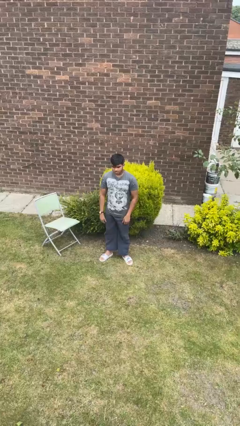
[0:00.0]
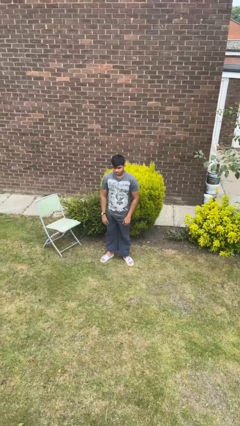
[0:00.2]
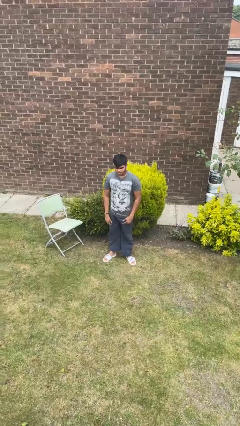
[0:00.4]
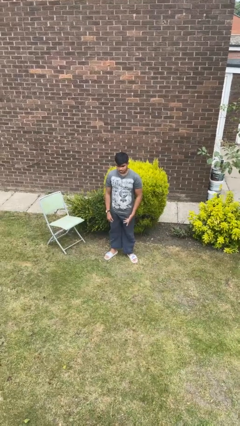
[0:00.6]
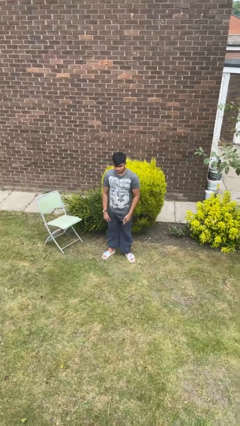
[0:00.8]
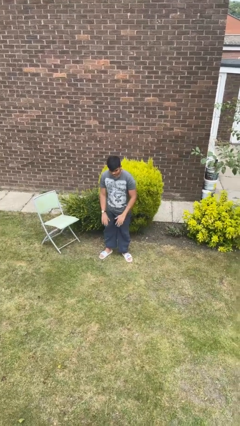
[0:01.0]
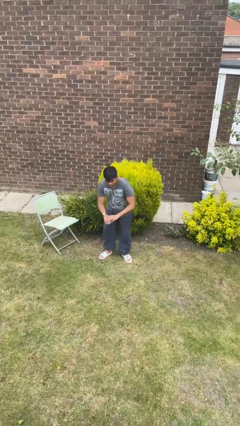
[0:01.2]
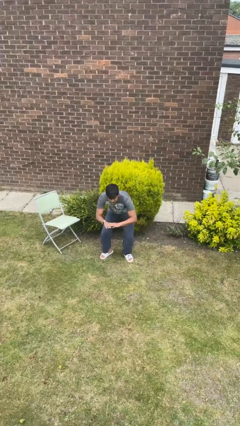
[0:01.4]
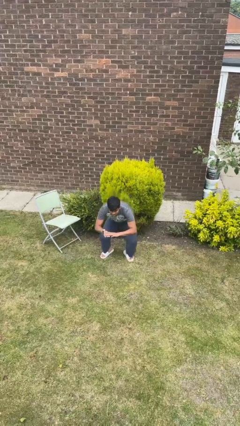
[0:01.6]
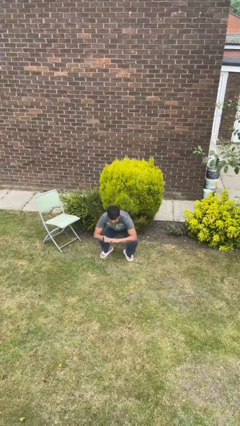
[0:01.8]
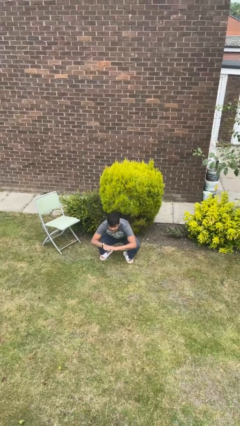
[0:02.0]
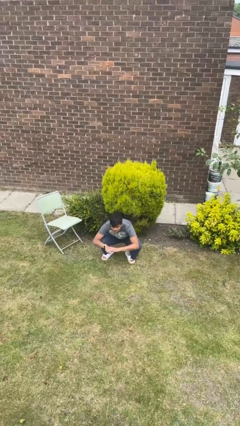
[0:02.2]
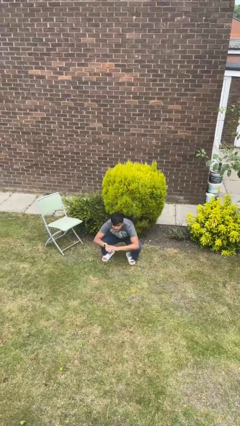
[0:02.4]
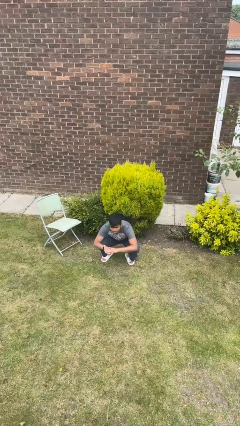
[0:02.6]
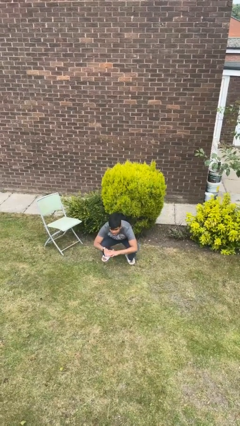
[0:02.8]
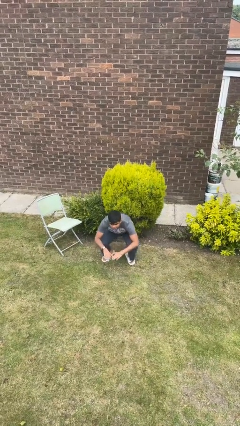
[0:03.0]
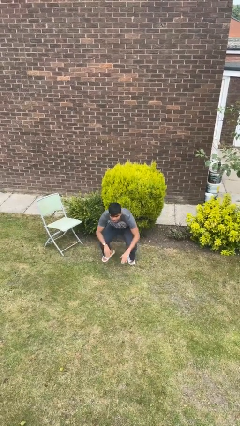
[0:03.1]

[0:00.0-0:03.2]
person squats

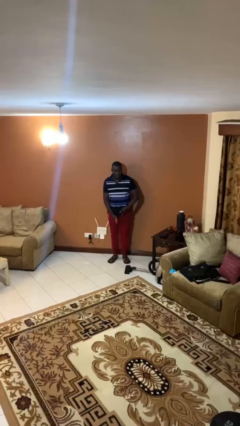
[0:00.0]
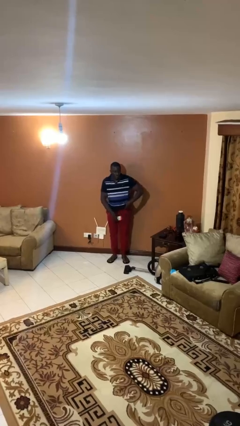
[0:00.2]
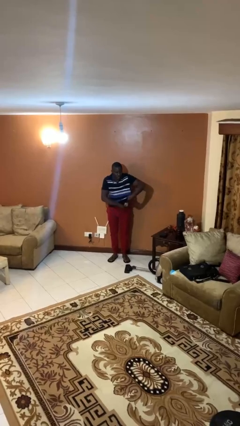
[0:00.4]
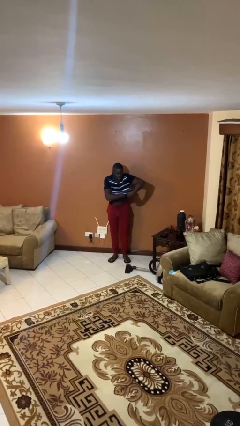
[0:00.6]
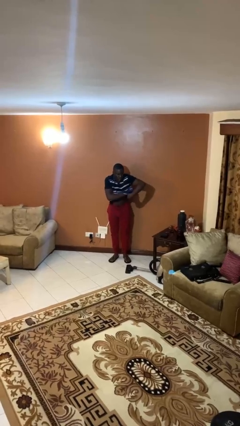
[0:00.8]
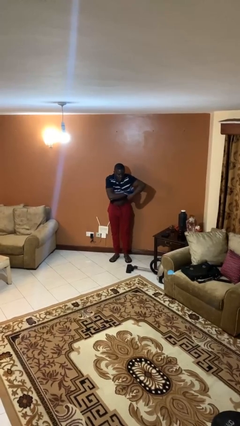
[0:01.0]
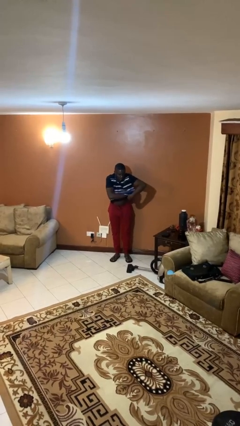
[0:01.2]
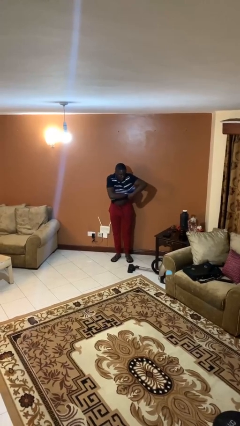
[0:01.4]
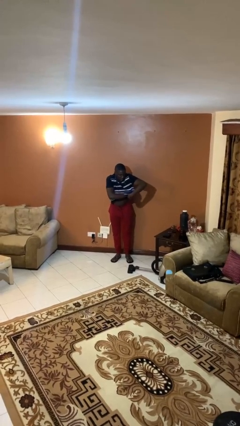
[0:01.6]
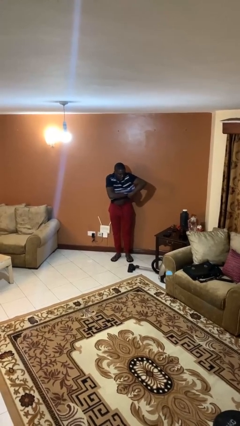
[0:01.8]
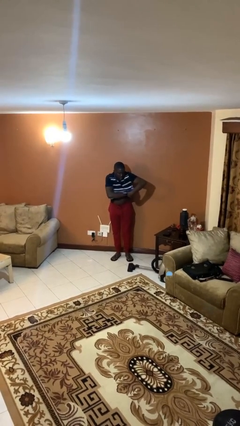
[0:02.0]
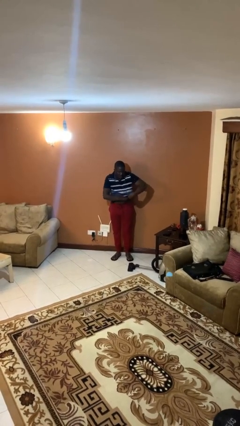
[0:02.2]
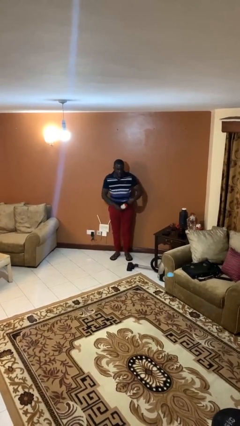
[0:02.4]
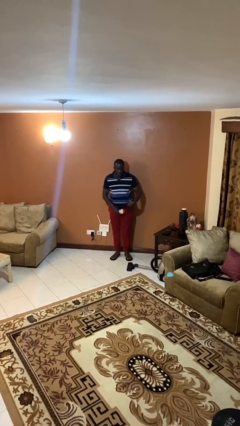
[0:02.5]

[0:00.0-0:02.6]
person applies deodorant

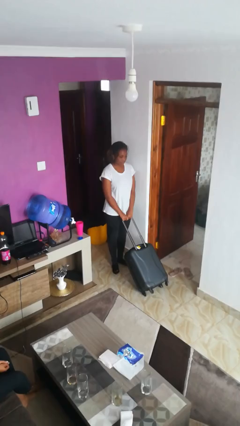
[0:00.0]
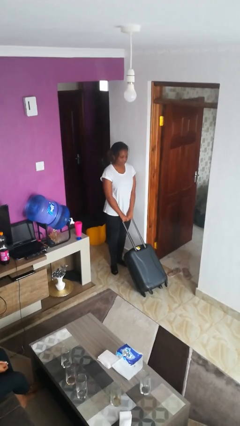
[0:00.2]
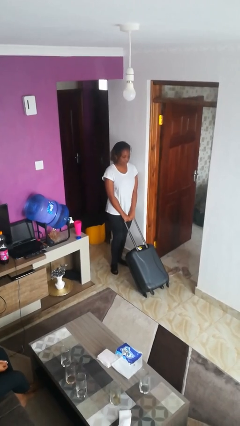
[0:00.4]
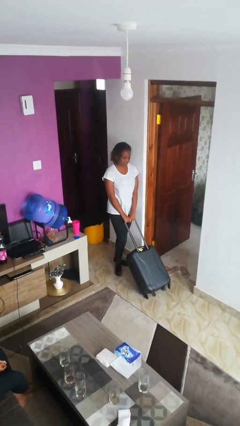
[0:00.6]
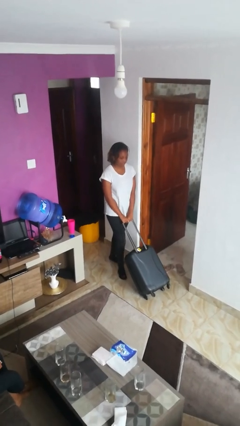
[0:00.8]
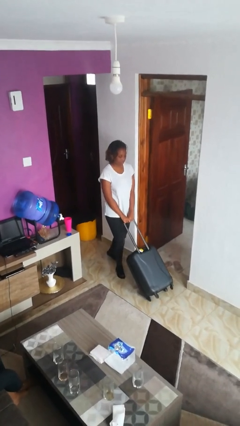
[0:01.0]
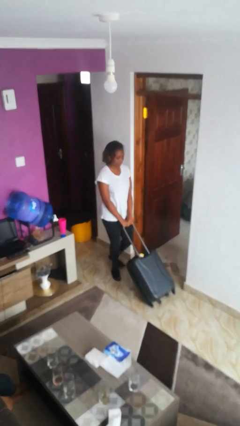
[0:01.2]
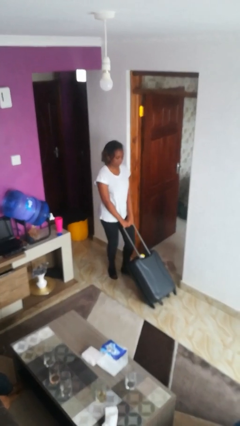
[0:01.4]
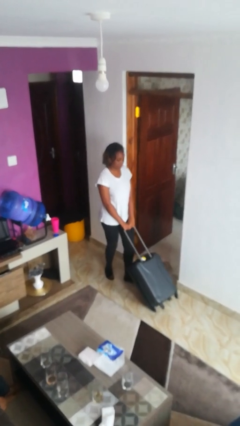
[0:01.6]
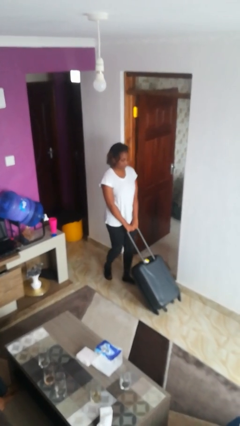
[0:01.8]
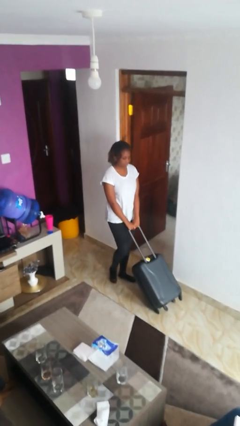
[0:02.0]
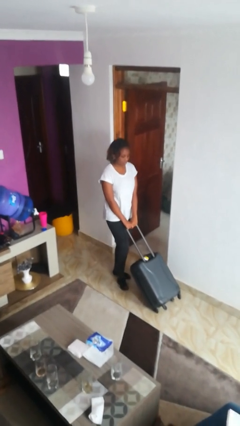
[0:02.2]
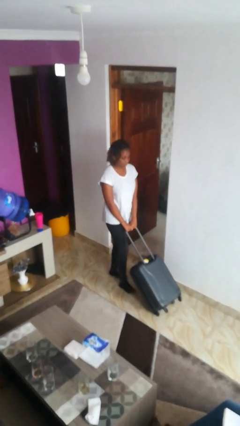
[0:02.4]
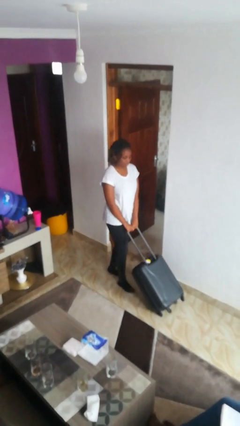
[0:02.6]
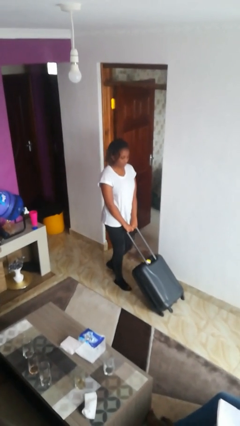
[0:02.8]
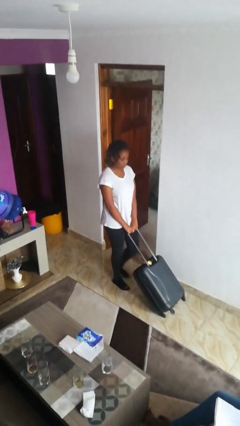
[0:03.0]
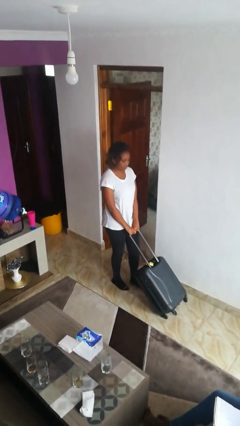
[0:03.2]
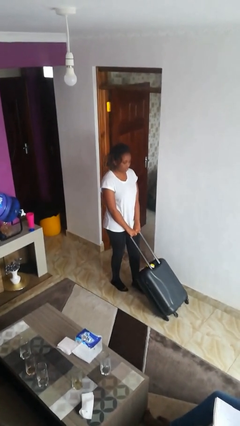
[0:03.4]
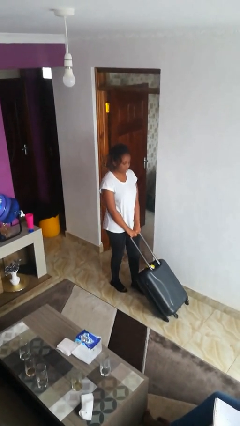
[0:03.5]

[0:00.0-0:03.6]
person pushes wheeled cart

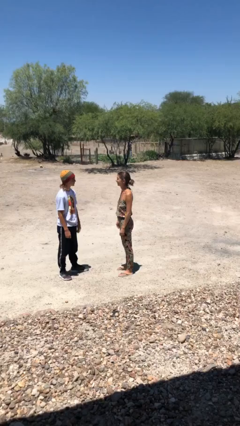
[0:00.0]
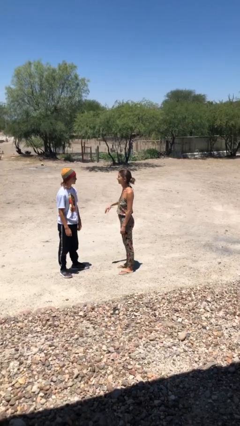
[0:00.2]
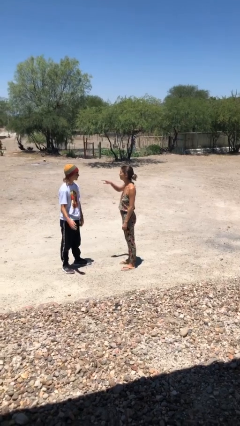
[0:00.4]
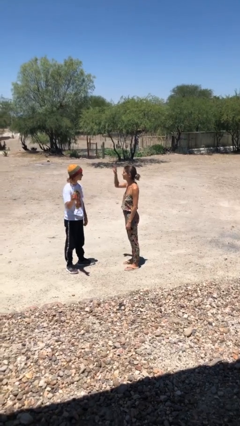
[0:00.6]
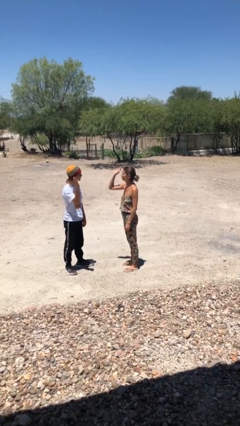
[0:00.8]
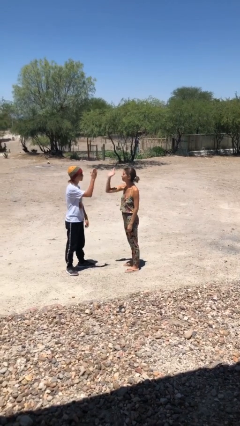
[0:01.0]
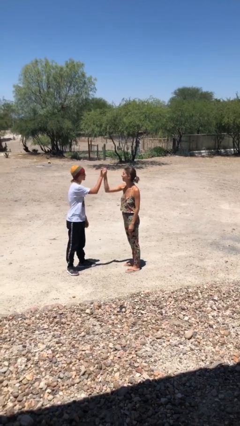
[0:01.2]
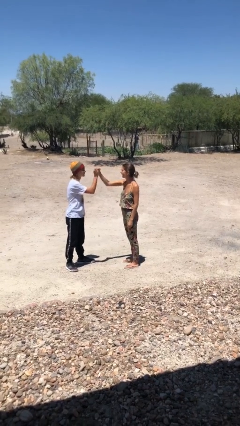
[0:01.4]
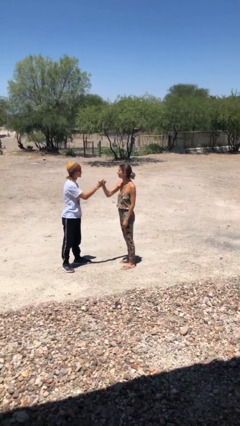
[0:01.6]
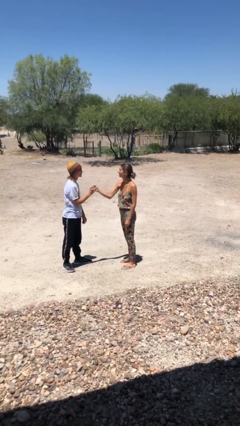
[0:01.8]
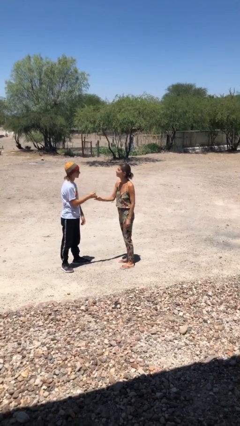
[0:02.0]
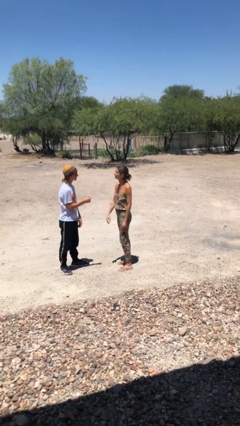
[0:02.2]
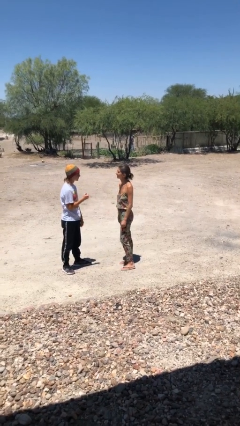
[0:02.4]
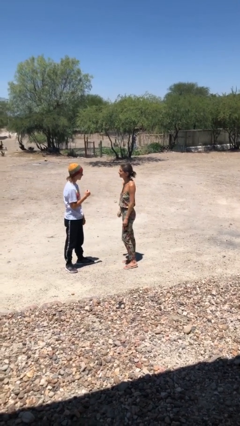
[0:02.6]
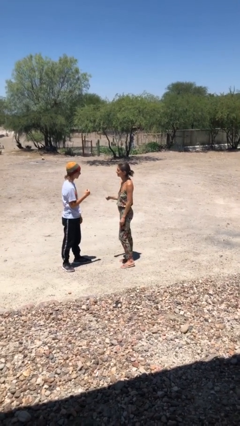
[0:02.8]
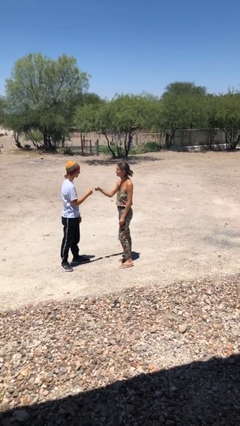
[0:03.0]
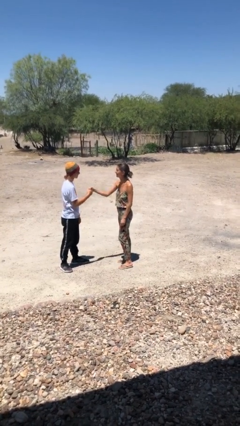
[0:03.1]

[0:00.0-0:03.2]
person highfives hand

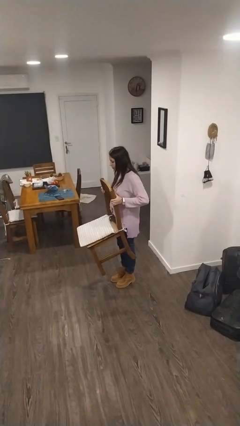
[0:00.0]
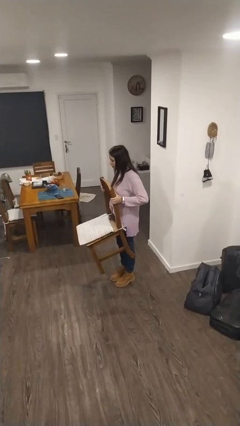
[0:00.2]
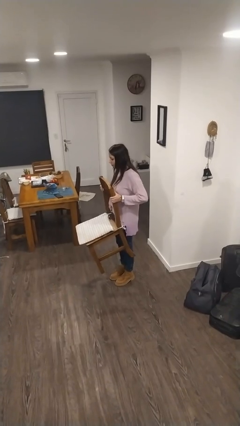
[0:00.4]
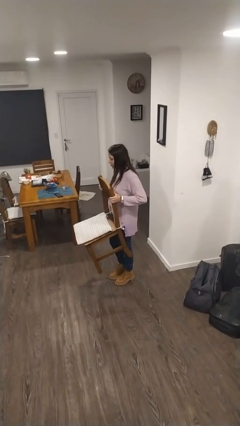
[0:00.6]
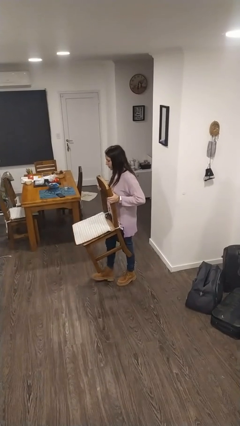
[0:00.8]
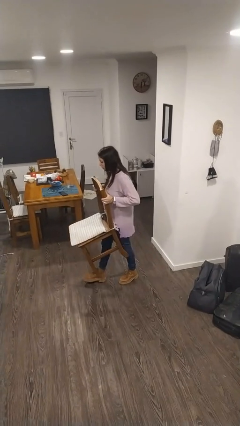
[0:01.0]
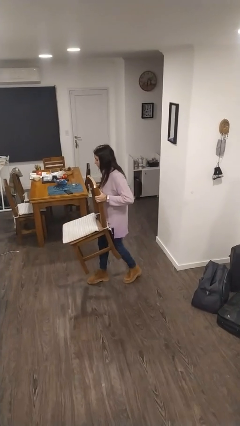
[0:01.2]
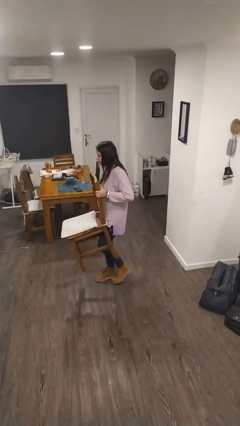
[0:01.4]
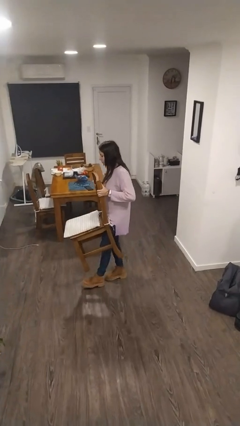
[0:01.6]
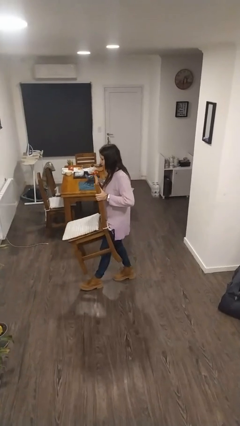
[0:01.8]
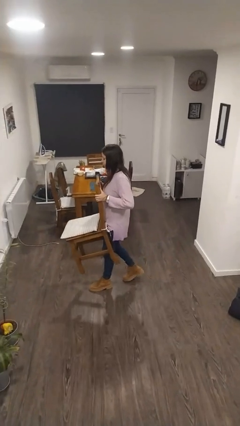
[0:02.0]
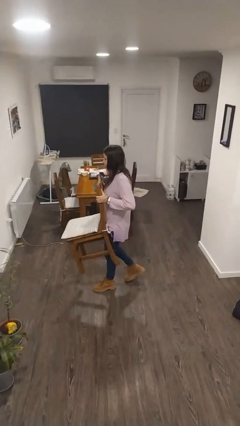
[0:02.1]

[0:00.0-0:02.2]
person carries furniture

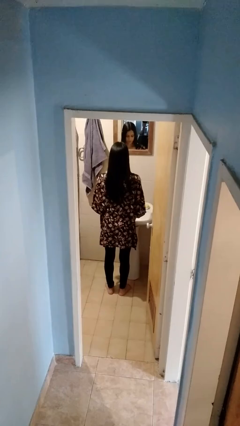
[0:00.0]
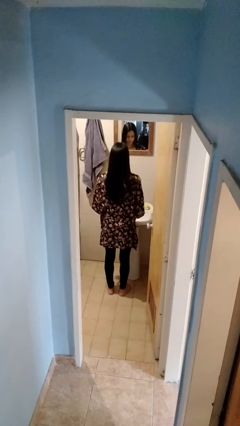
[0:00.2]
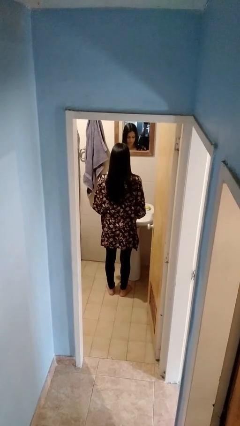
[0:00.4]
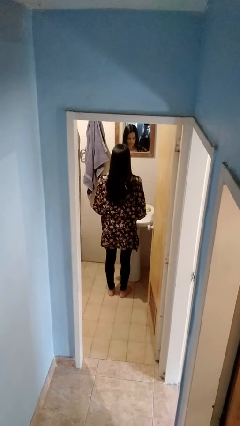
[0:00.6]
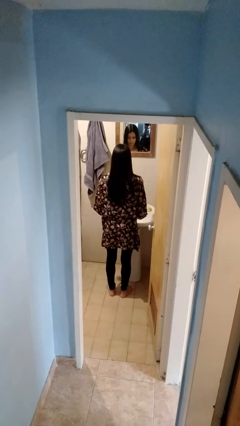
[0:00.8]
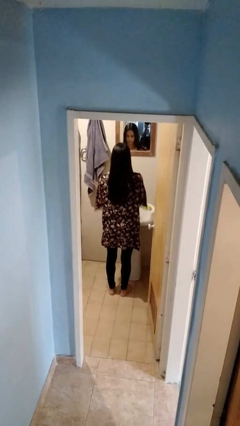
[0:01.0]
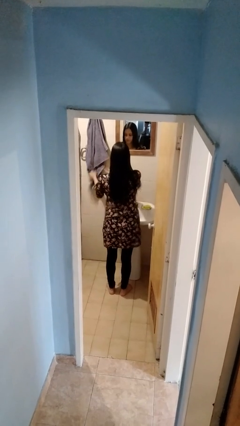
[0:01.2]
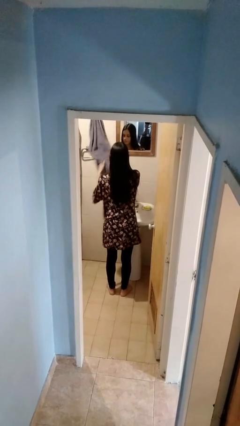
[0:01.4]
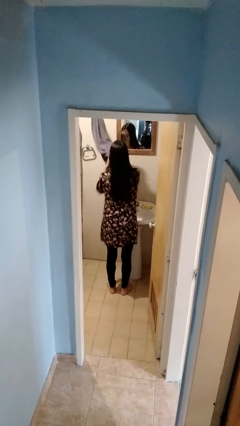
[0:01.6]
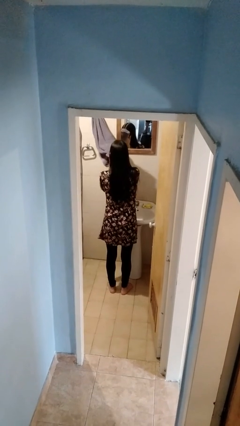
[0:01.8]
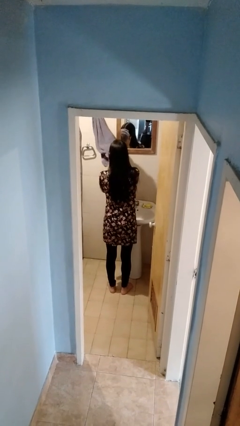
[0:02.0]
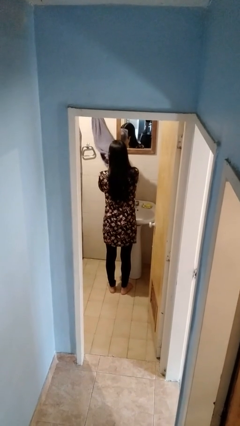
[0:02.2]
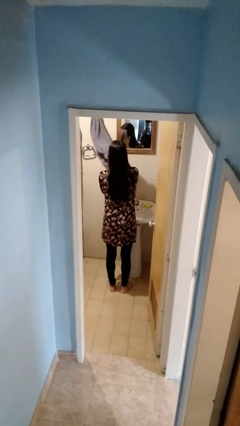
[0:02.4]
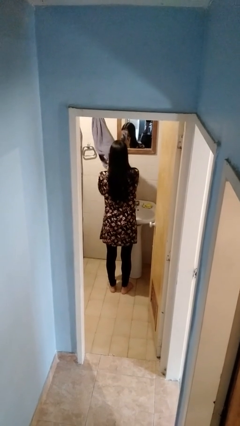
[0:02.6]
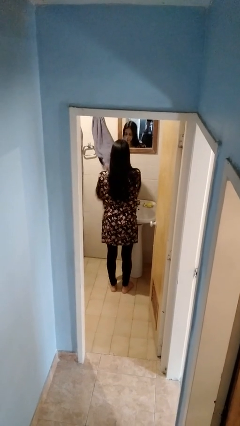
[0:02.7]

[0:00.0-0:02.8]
person dries face with towel
